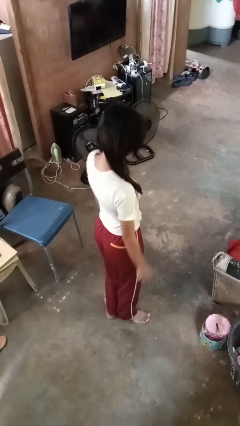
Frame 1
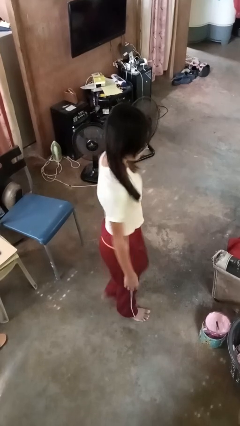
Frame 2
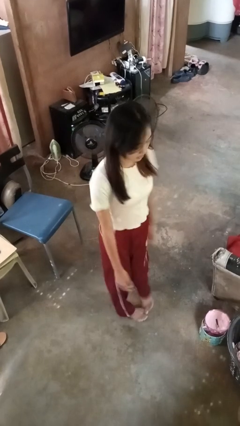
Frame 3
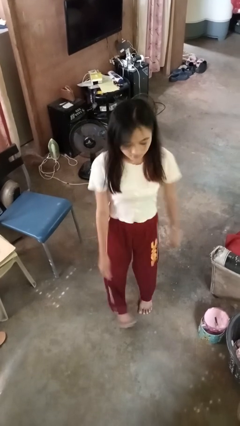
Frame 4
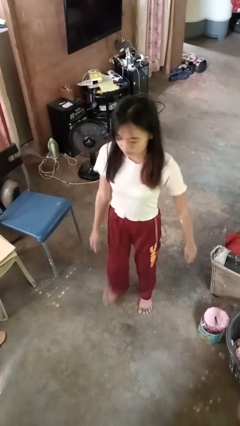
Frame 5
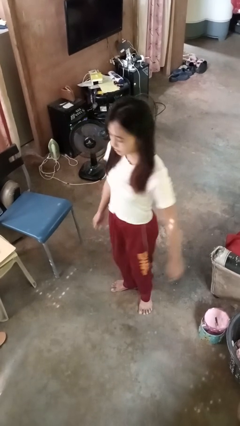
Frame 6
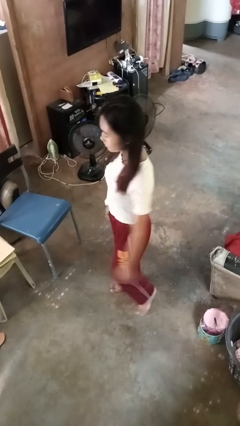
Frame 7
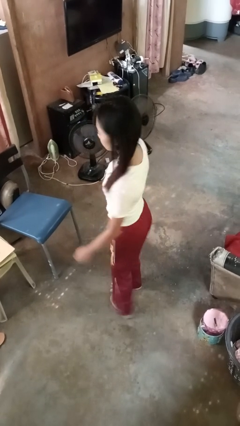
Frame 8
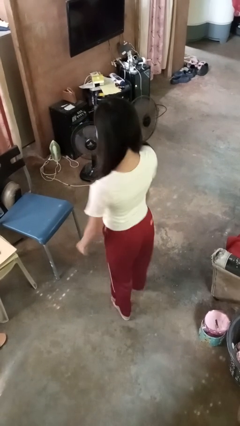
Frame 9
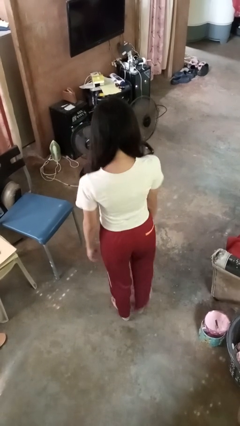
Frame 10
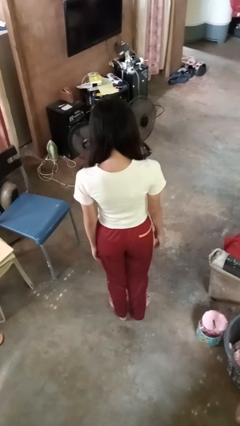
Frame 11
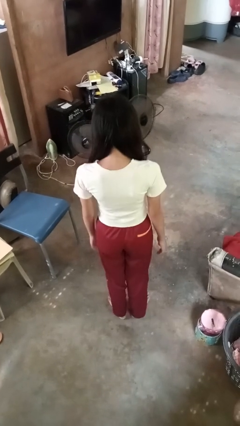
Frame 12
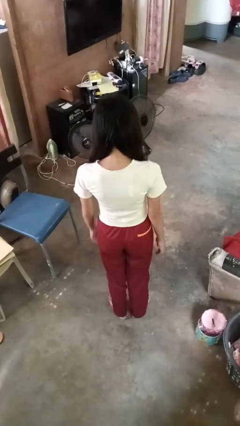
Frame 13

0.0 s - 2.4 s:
person twirls

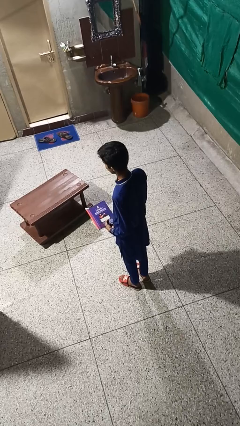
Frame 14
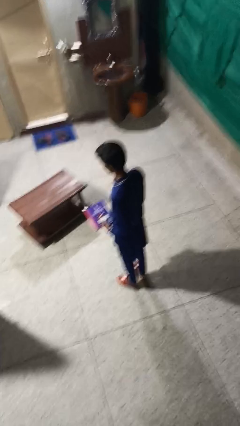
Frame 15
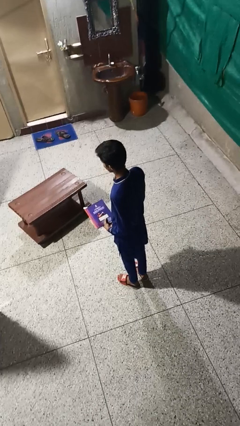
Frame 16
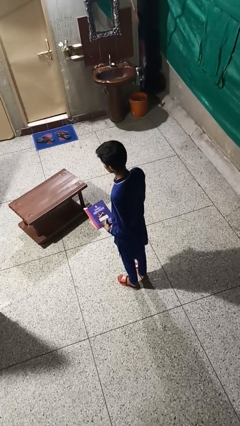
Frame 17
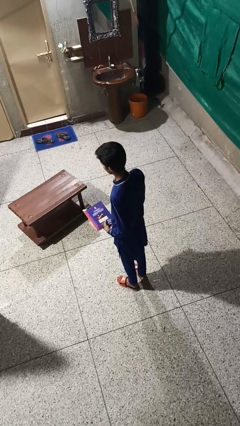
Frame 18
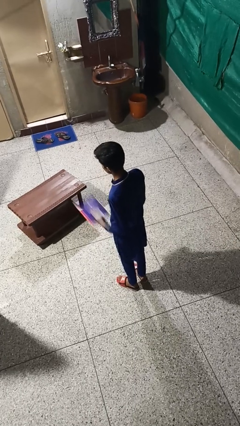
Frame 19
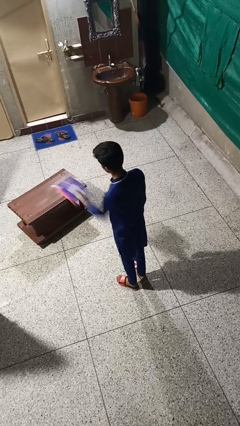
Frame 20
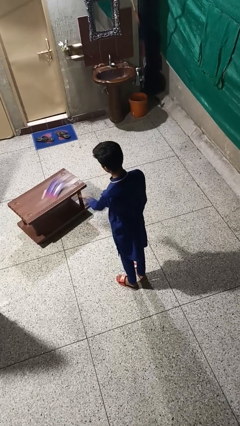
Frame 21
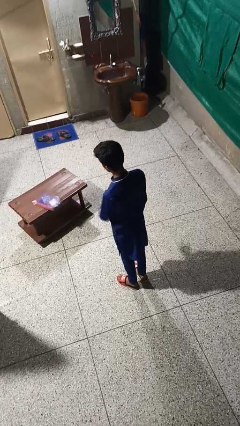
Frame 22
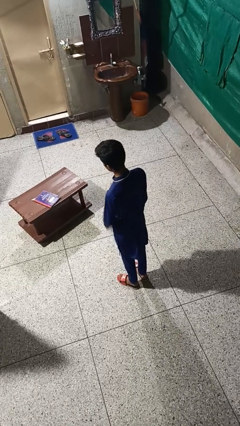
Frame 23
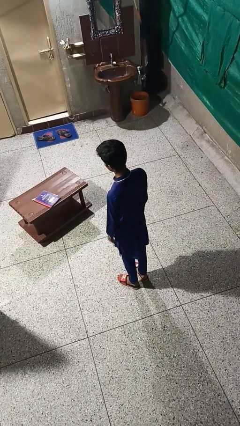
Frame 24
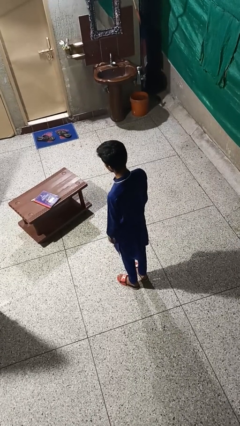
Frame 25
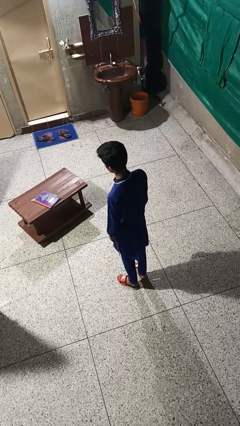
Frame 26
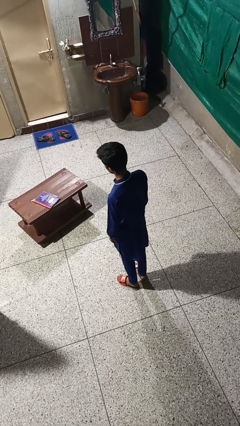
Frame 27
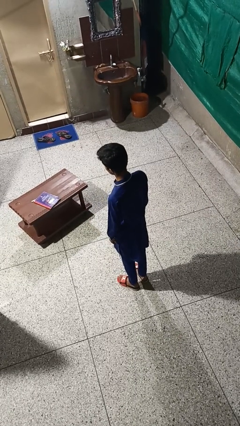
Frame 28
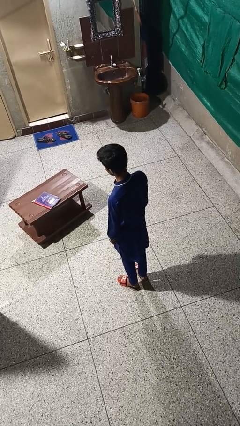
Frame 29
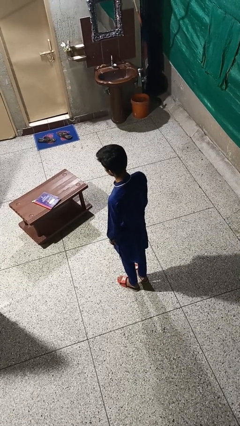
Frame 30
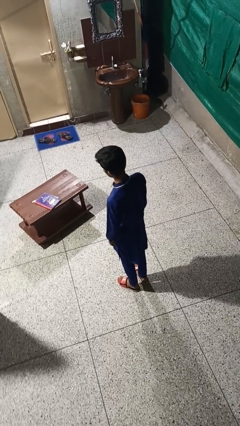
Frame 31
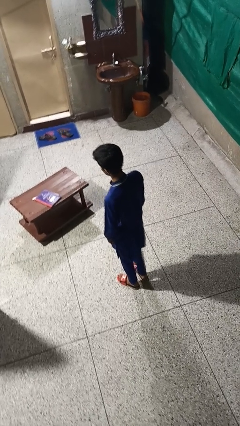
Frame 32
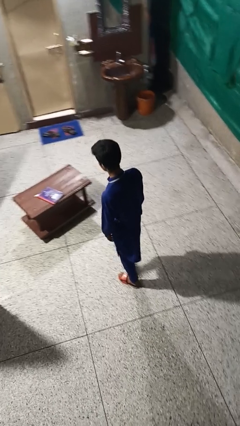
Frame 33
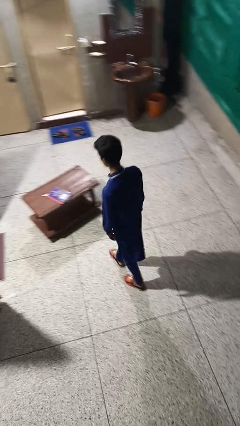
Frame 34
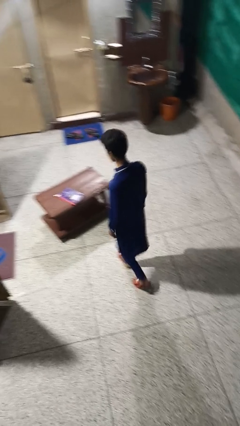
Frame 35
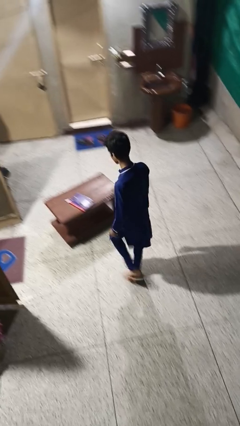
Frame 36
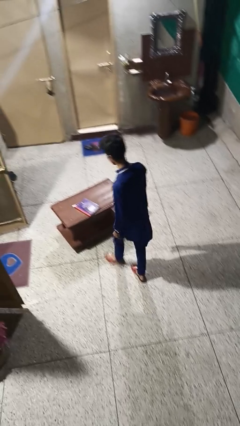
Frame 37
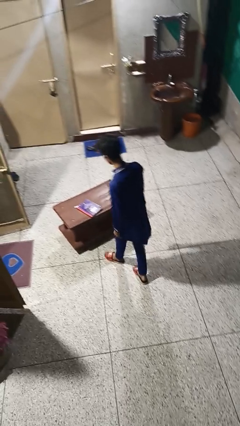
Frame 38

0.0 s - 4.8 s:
person throws object on table

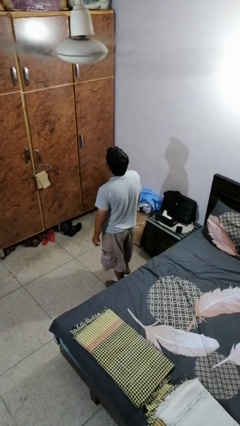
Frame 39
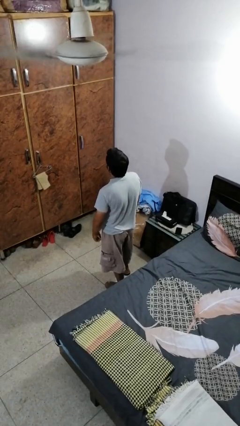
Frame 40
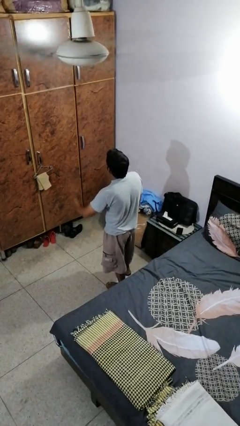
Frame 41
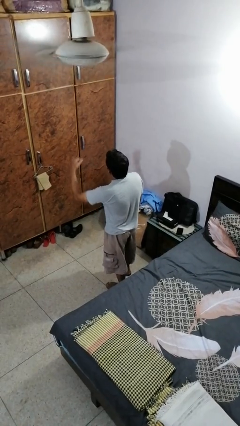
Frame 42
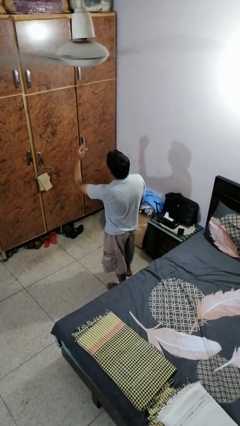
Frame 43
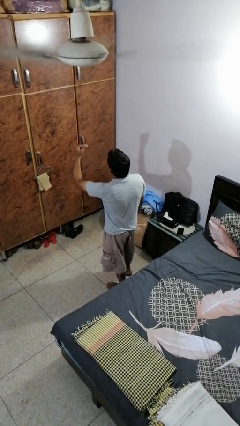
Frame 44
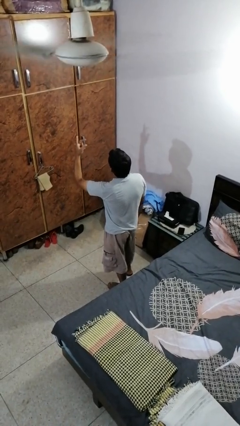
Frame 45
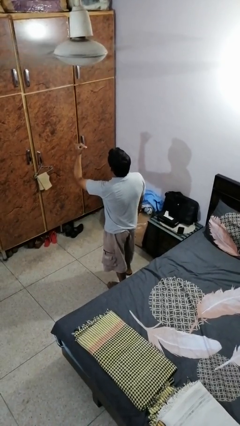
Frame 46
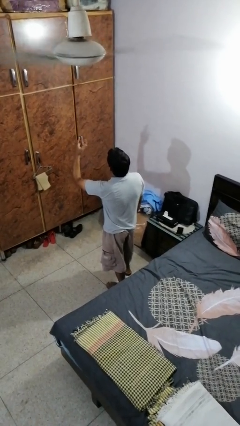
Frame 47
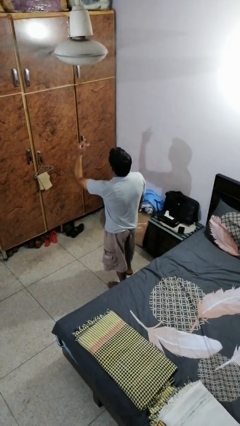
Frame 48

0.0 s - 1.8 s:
person snaps fingers

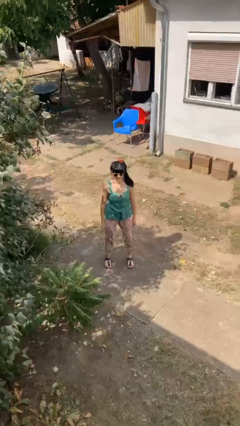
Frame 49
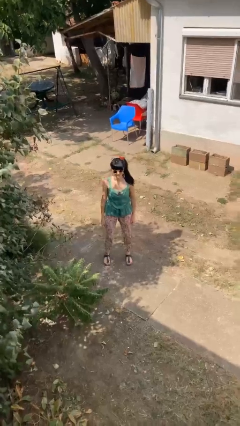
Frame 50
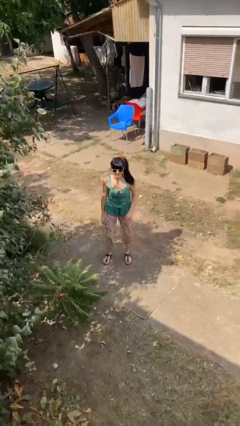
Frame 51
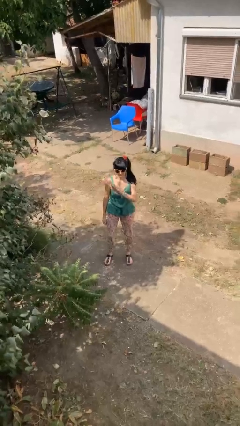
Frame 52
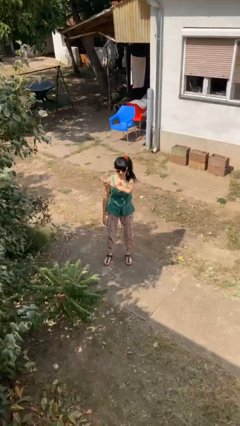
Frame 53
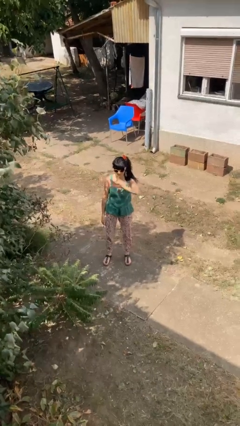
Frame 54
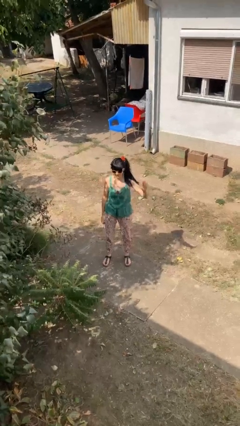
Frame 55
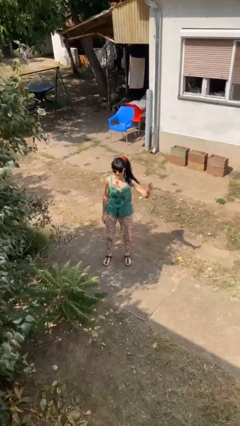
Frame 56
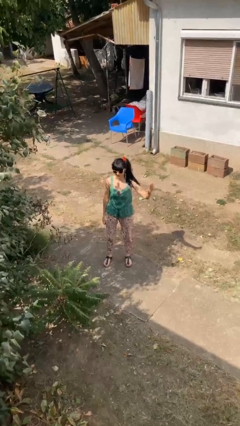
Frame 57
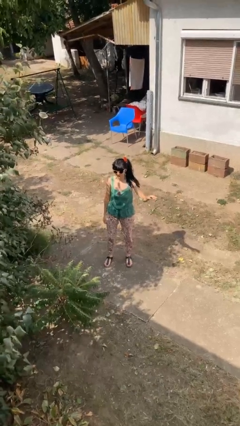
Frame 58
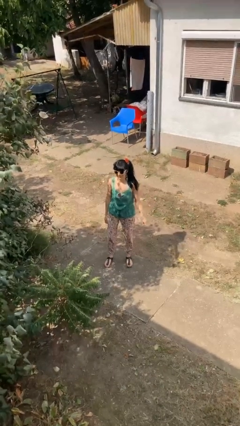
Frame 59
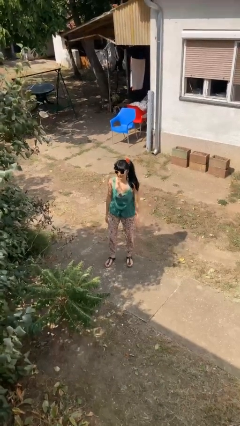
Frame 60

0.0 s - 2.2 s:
person gestures swipe left

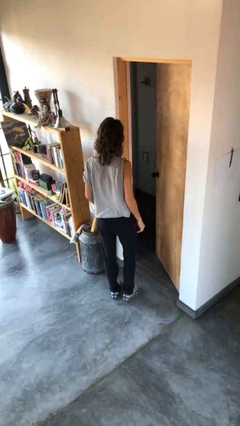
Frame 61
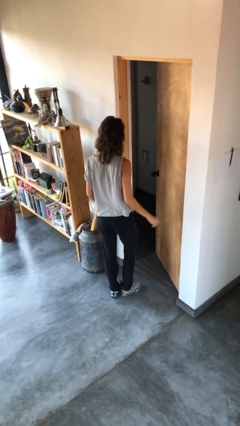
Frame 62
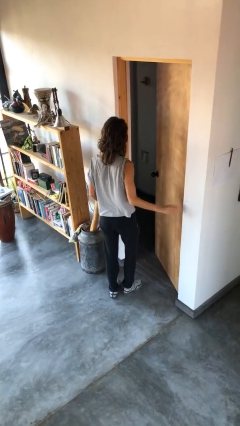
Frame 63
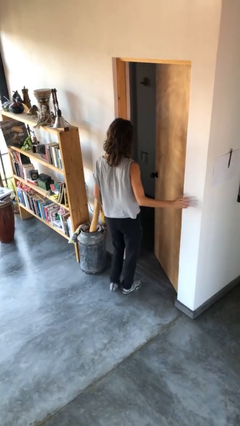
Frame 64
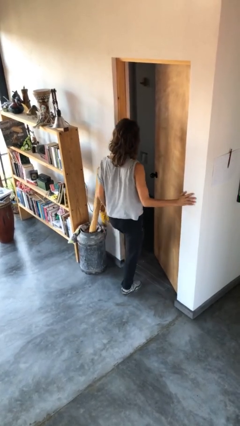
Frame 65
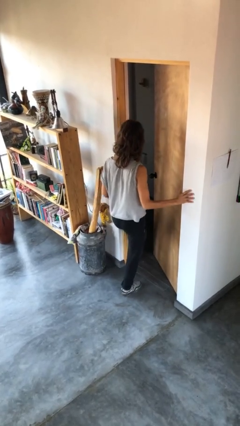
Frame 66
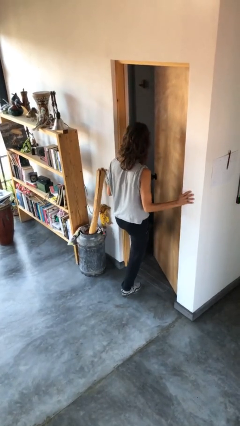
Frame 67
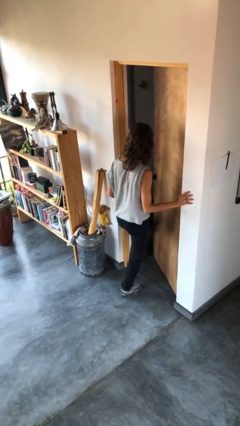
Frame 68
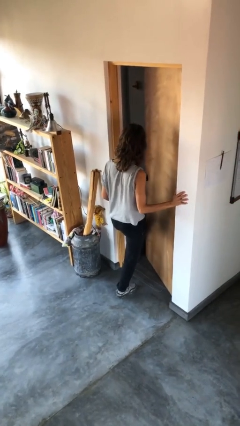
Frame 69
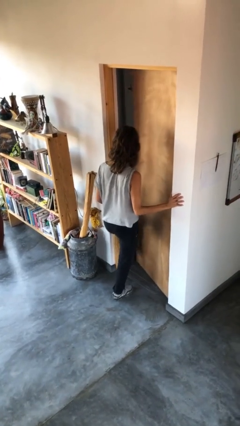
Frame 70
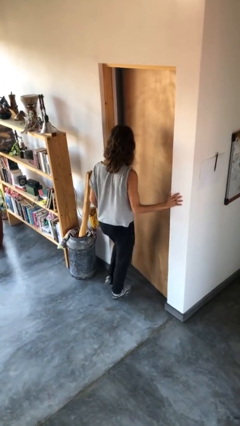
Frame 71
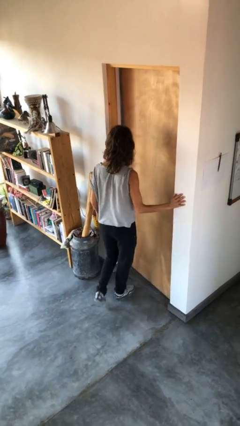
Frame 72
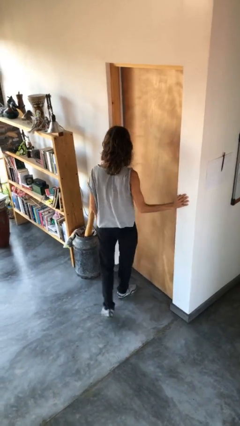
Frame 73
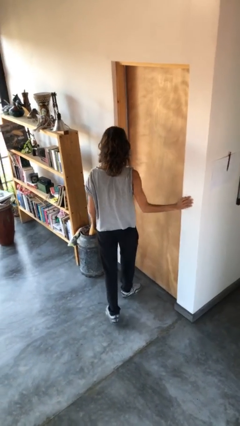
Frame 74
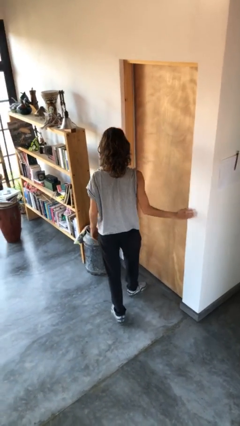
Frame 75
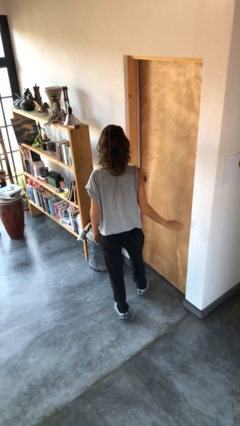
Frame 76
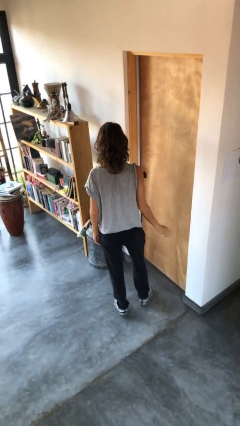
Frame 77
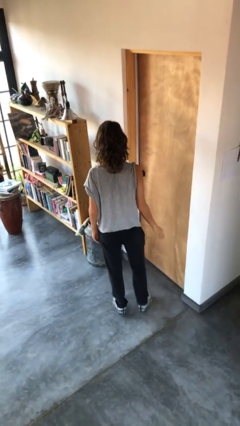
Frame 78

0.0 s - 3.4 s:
person closes door with foot

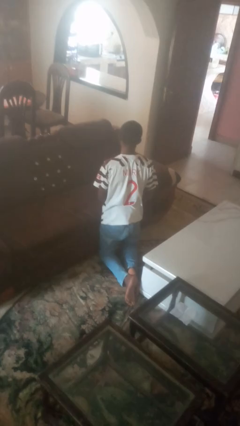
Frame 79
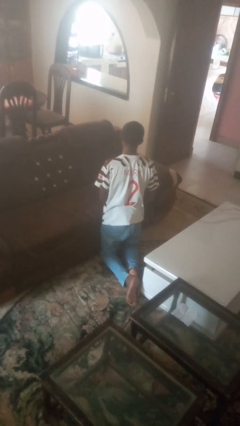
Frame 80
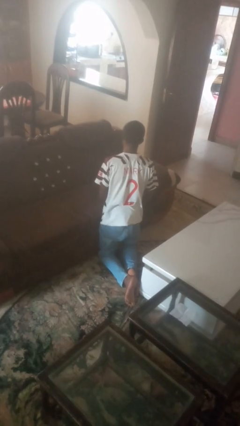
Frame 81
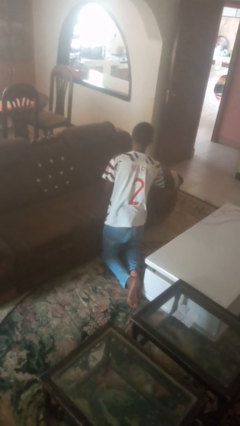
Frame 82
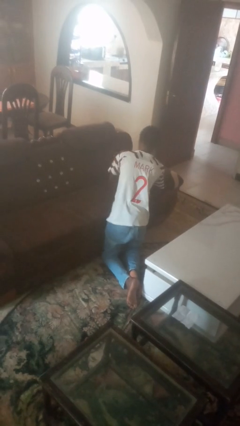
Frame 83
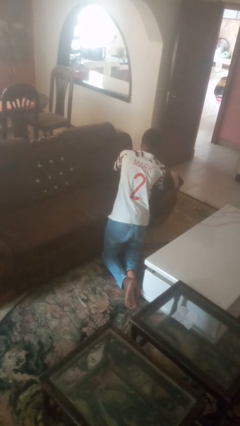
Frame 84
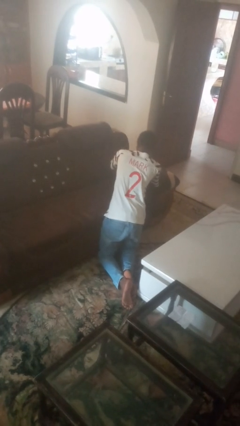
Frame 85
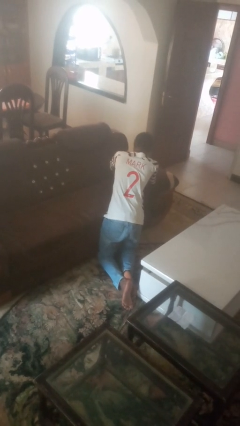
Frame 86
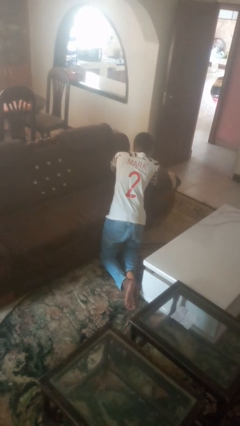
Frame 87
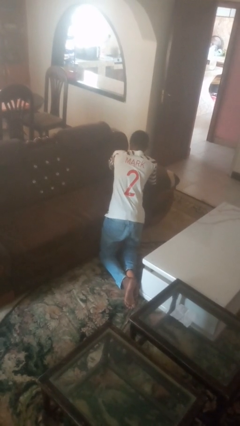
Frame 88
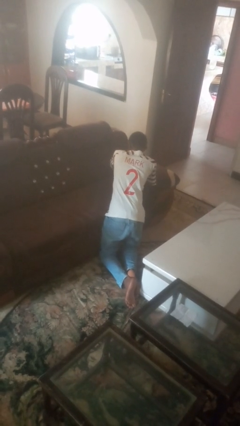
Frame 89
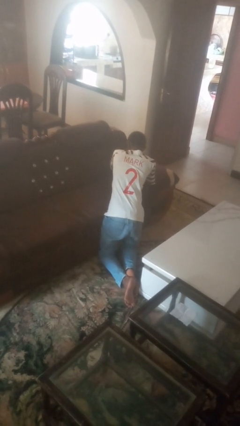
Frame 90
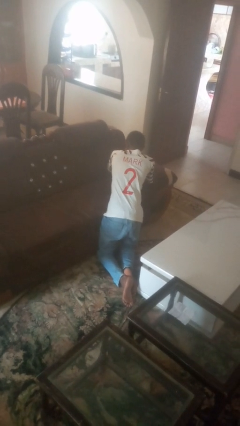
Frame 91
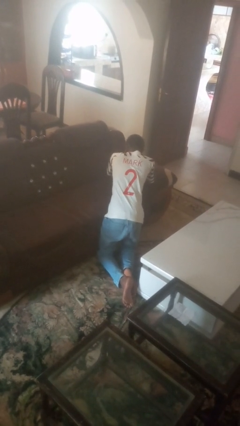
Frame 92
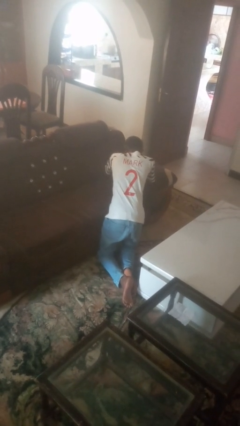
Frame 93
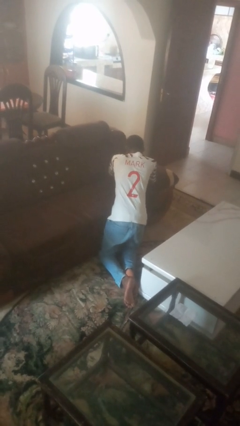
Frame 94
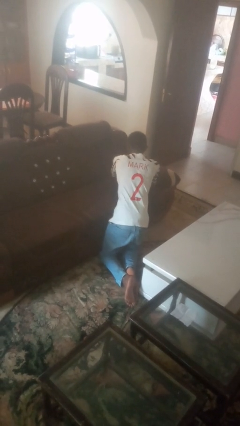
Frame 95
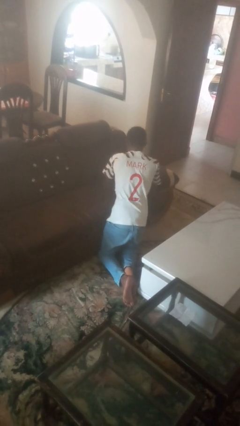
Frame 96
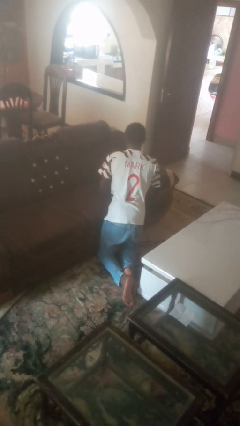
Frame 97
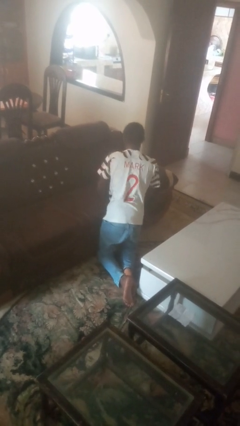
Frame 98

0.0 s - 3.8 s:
person searches in couch
